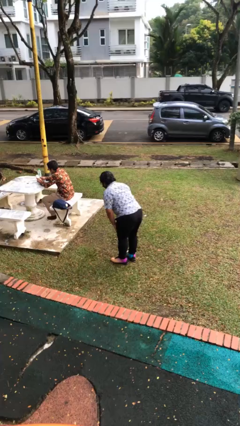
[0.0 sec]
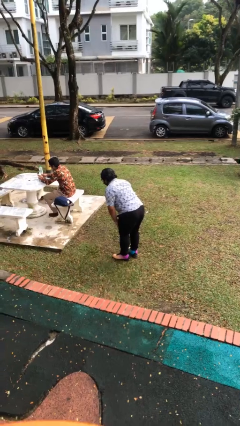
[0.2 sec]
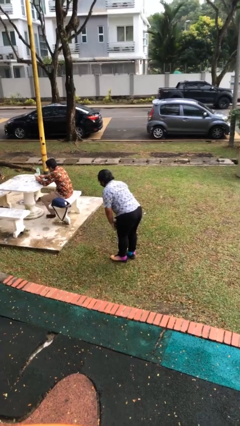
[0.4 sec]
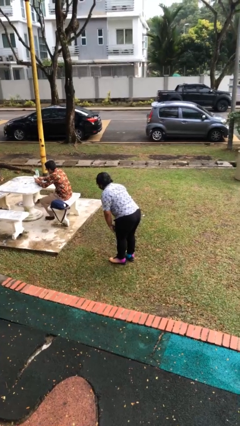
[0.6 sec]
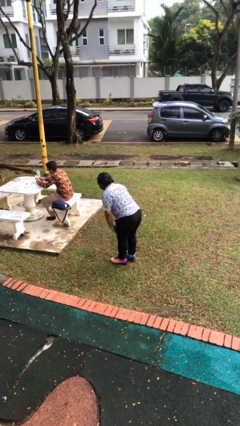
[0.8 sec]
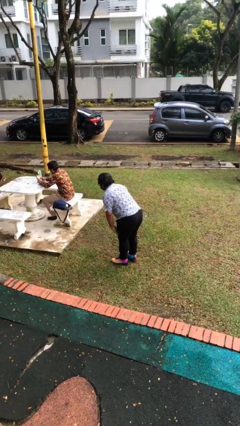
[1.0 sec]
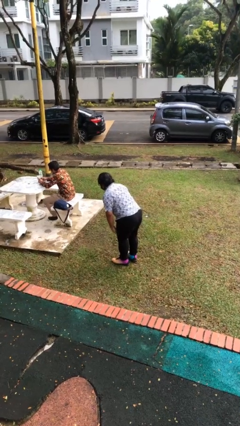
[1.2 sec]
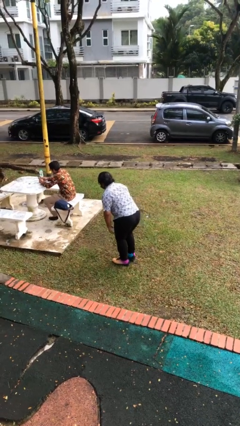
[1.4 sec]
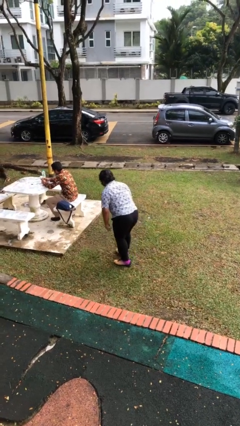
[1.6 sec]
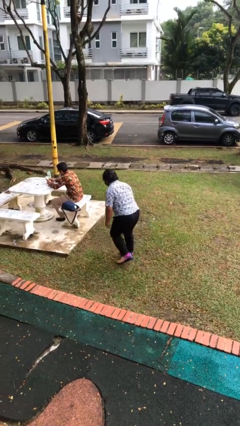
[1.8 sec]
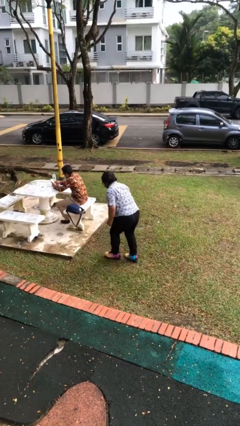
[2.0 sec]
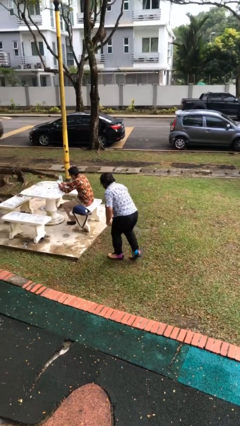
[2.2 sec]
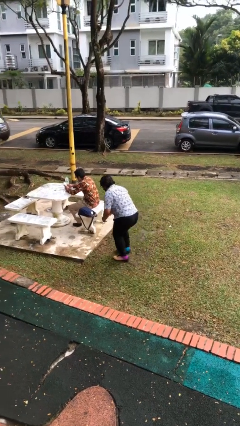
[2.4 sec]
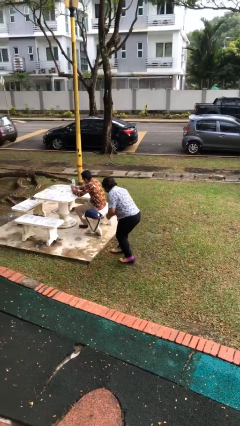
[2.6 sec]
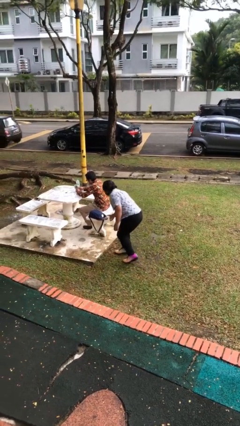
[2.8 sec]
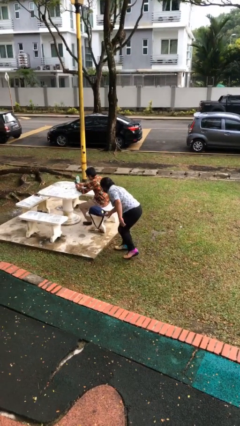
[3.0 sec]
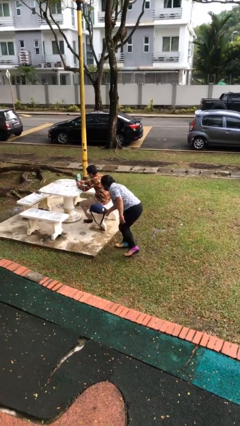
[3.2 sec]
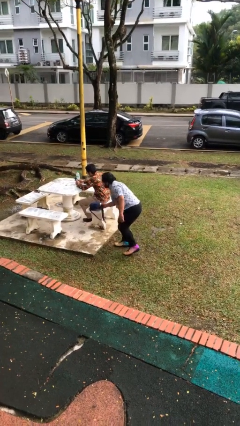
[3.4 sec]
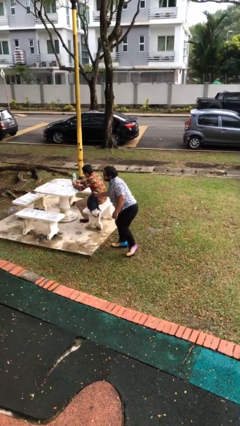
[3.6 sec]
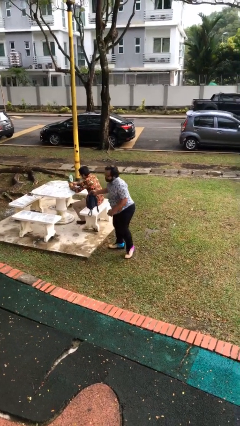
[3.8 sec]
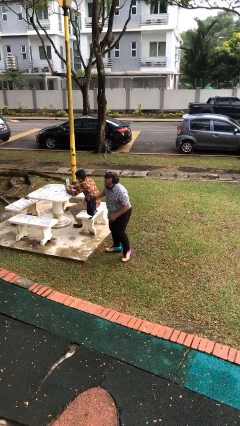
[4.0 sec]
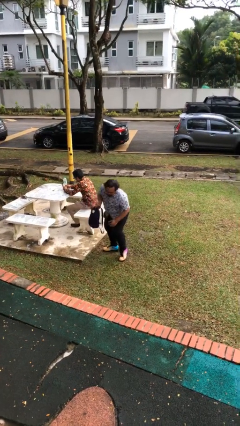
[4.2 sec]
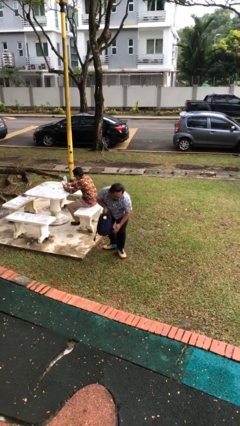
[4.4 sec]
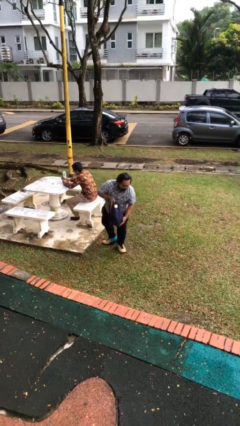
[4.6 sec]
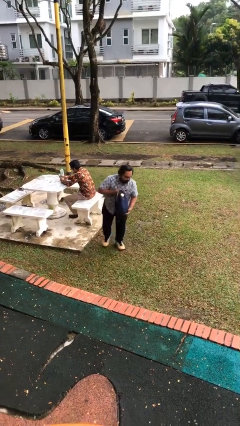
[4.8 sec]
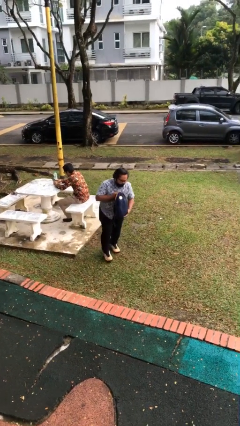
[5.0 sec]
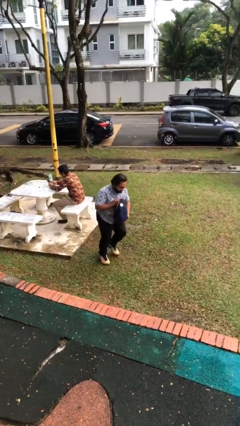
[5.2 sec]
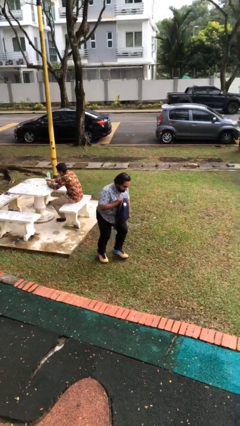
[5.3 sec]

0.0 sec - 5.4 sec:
person steals object from person

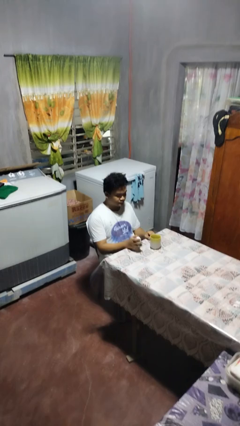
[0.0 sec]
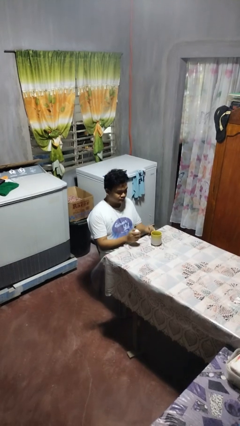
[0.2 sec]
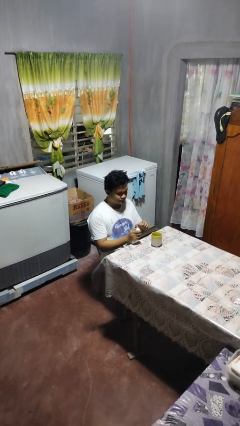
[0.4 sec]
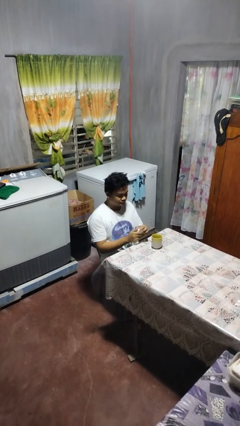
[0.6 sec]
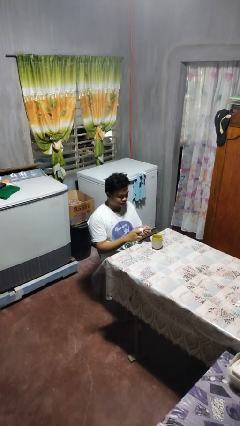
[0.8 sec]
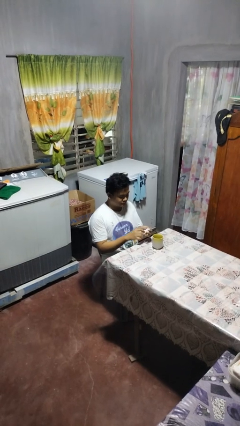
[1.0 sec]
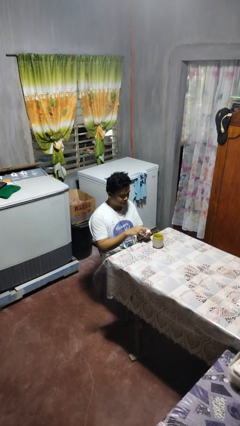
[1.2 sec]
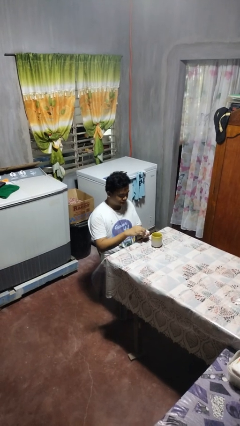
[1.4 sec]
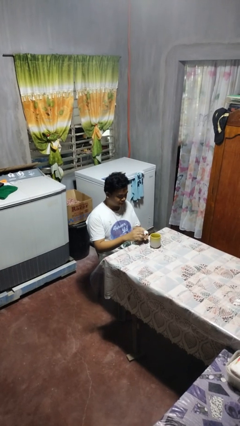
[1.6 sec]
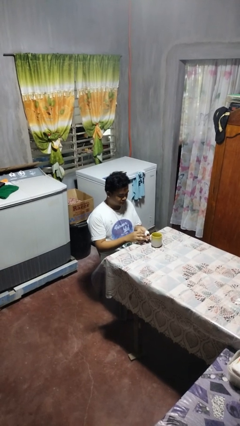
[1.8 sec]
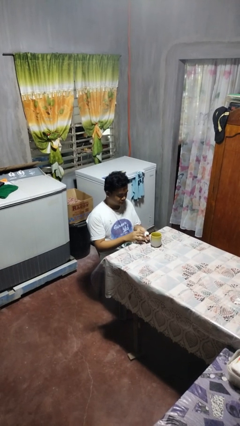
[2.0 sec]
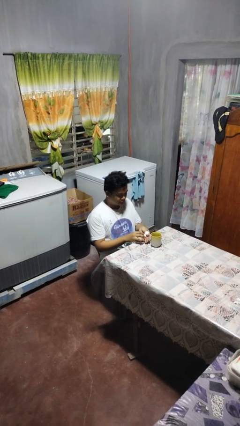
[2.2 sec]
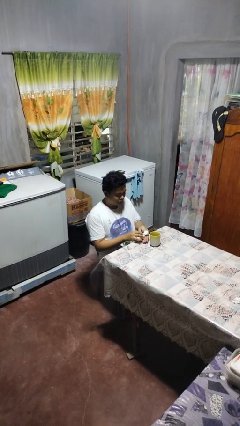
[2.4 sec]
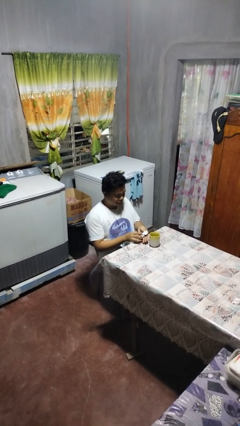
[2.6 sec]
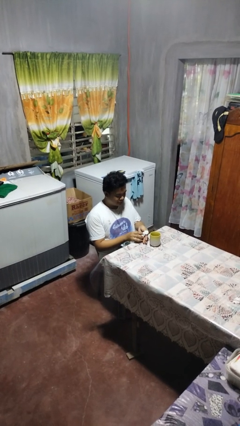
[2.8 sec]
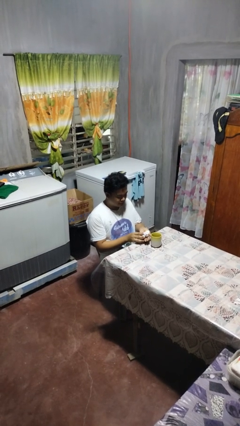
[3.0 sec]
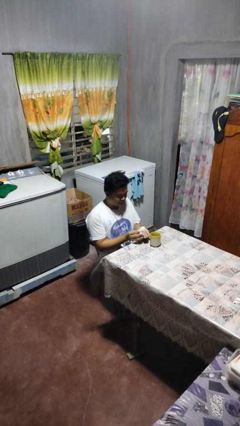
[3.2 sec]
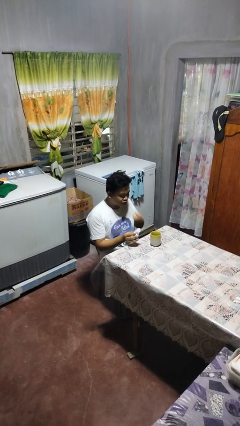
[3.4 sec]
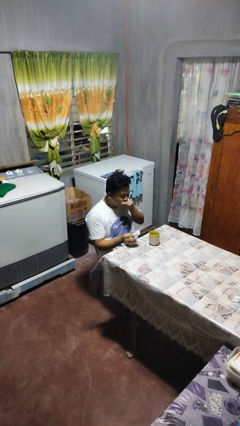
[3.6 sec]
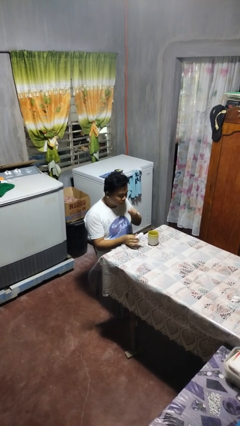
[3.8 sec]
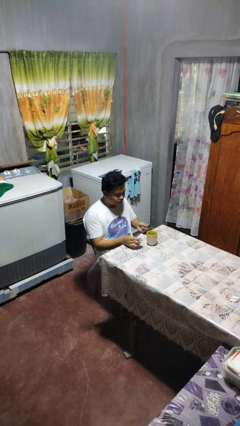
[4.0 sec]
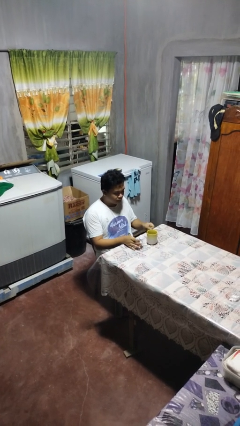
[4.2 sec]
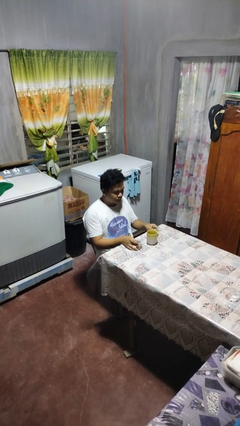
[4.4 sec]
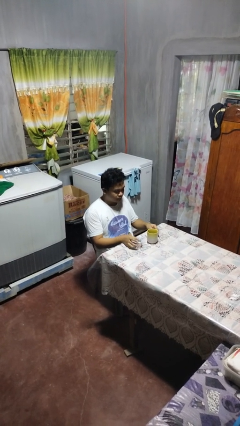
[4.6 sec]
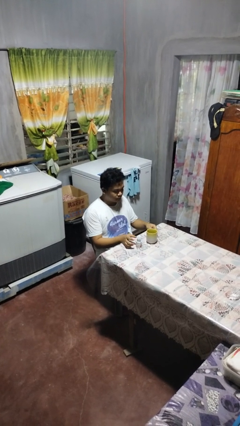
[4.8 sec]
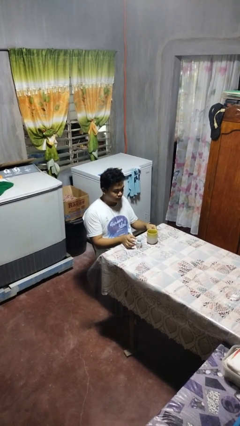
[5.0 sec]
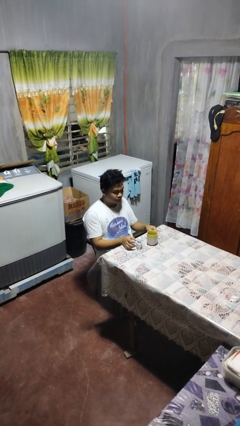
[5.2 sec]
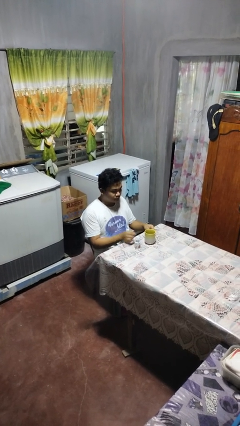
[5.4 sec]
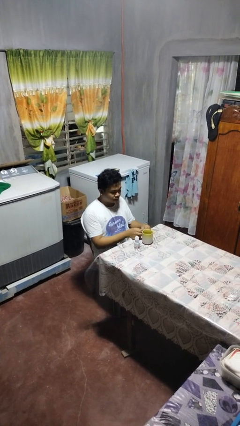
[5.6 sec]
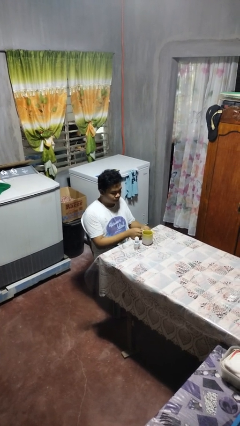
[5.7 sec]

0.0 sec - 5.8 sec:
person takes medicine pills

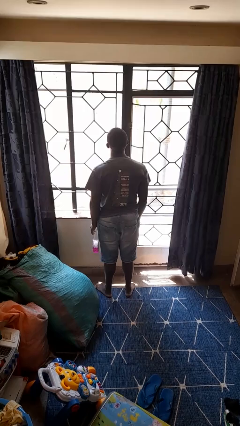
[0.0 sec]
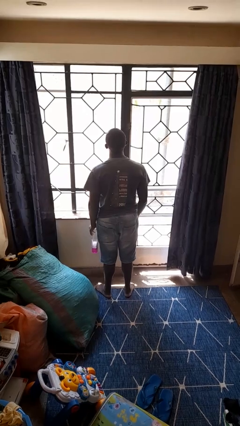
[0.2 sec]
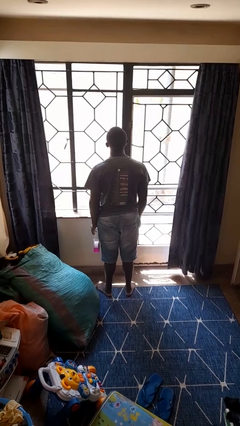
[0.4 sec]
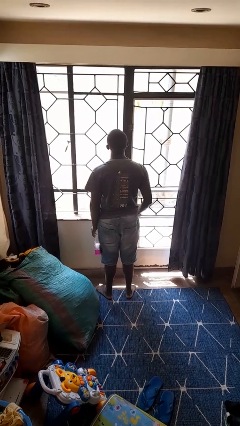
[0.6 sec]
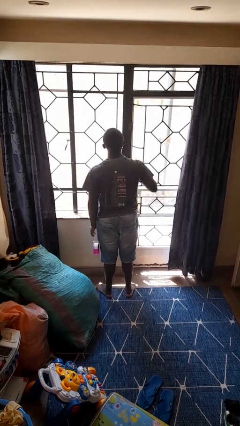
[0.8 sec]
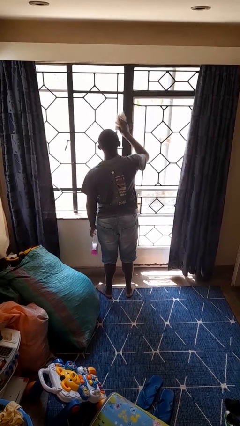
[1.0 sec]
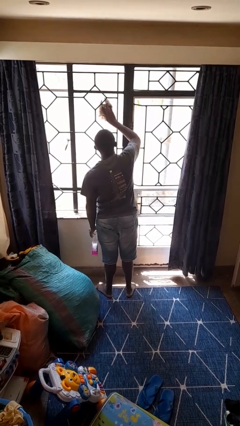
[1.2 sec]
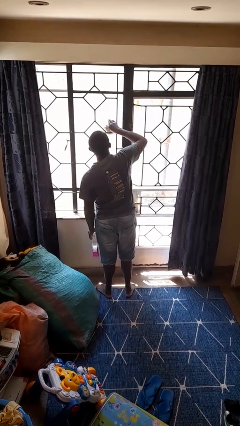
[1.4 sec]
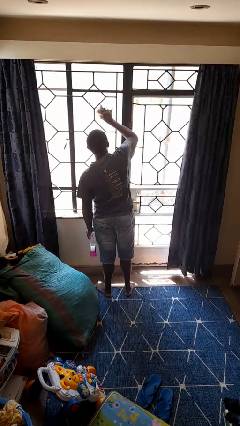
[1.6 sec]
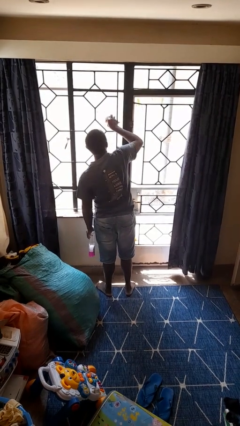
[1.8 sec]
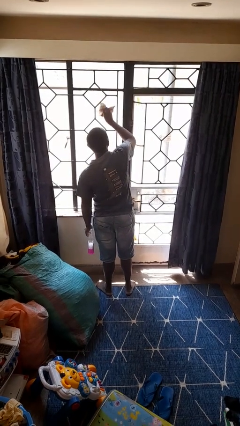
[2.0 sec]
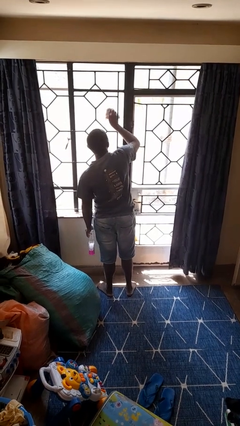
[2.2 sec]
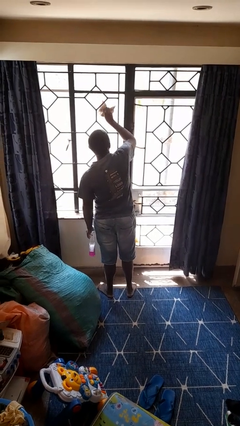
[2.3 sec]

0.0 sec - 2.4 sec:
person washes window

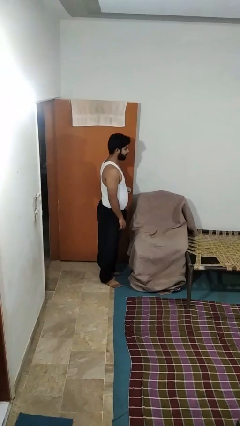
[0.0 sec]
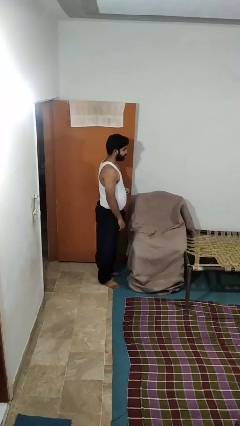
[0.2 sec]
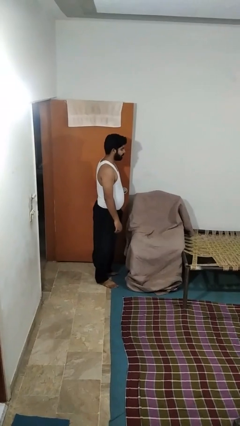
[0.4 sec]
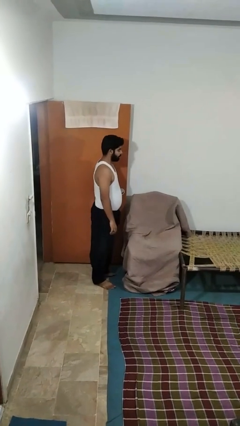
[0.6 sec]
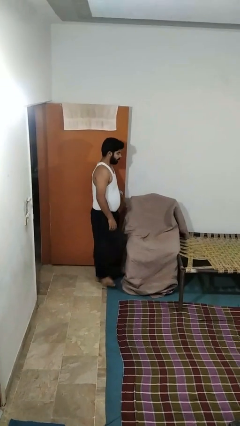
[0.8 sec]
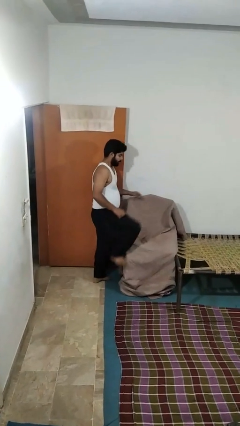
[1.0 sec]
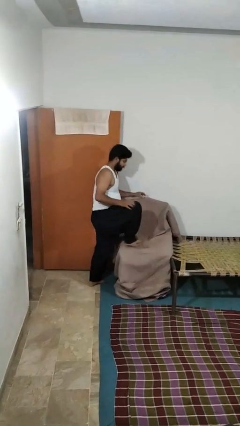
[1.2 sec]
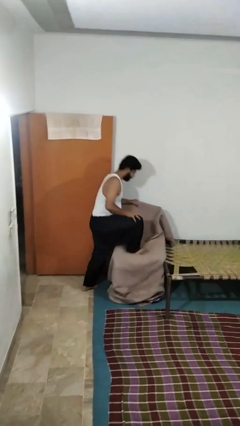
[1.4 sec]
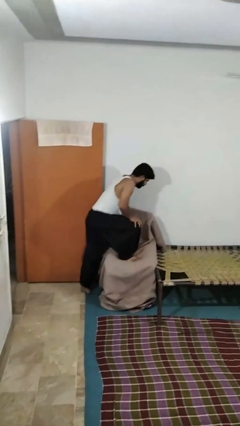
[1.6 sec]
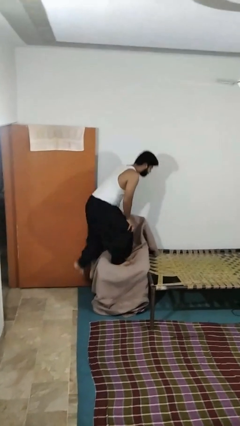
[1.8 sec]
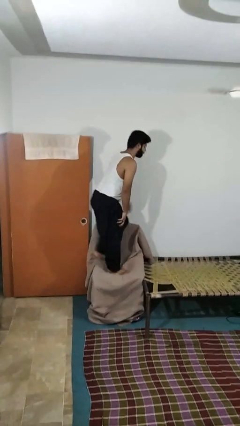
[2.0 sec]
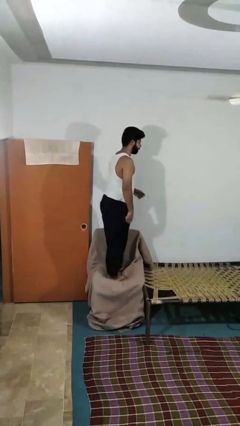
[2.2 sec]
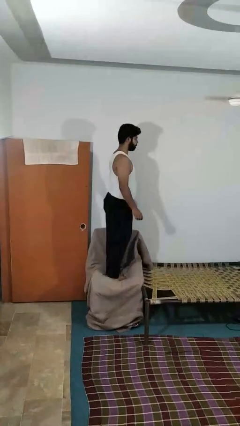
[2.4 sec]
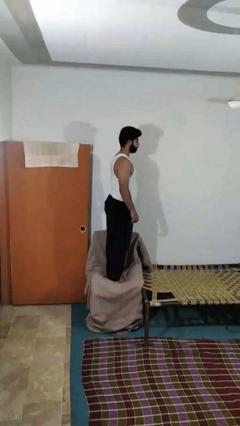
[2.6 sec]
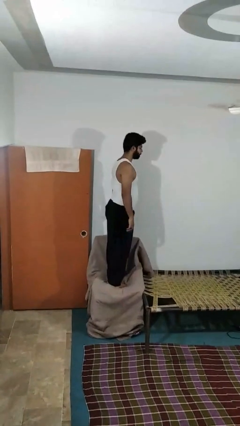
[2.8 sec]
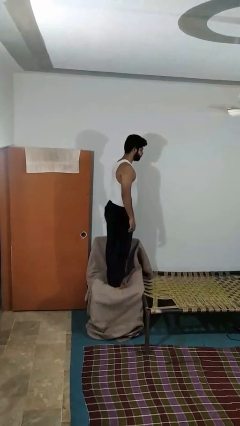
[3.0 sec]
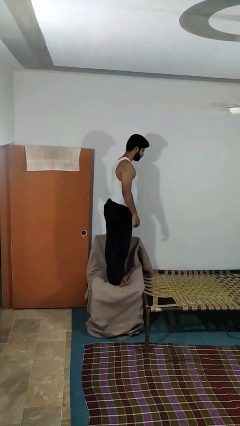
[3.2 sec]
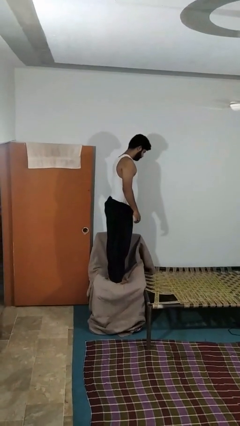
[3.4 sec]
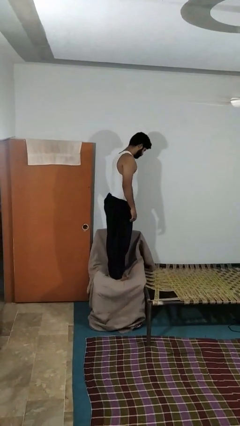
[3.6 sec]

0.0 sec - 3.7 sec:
person climbs on couch

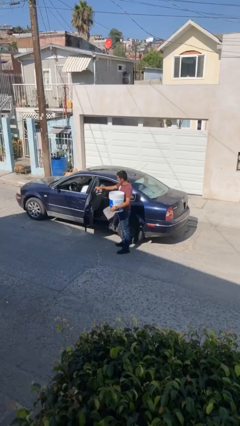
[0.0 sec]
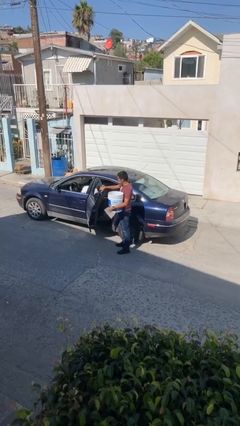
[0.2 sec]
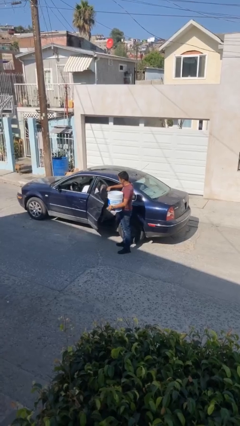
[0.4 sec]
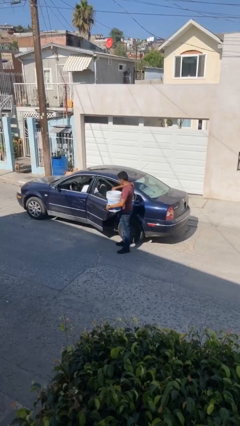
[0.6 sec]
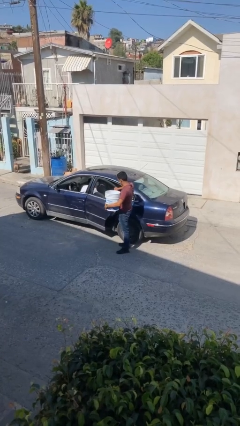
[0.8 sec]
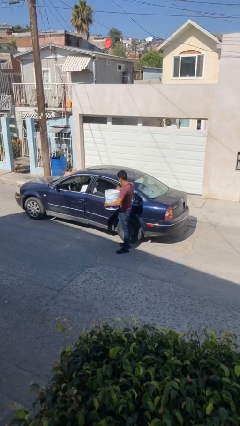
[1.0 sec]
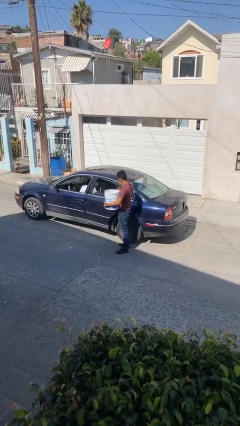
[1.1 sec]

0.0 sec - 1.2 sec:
person closes car door
